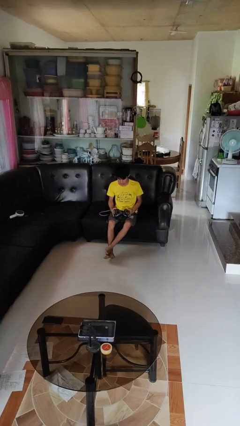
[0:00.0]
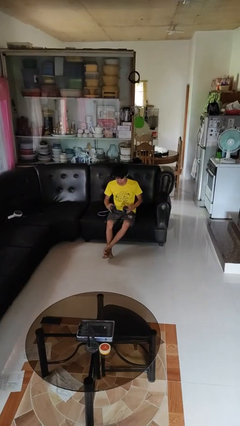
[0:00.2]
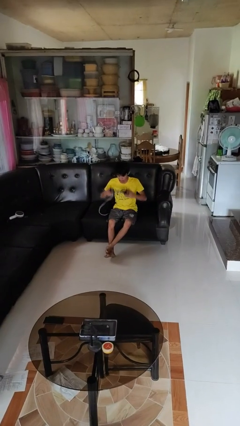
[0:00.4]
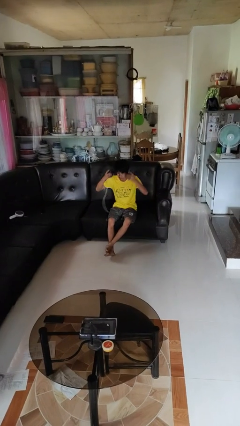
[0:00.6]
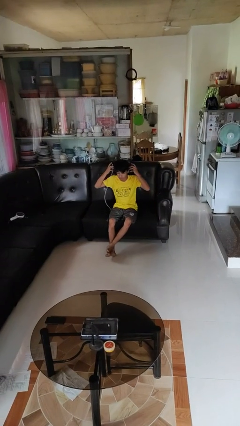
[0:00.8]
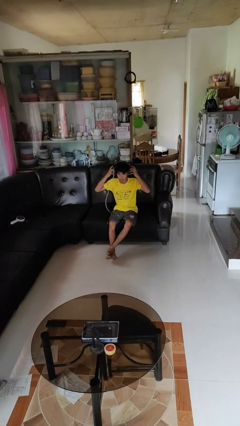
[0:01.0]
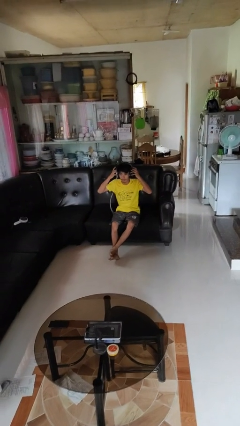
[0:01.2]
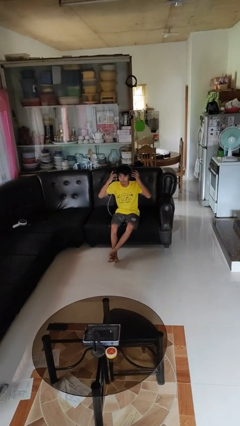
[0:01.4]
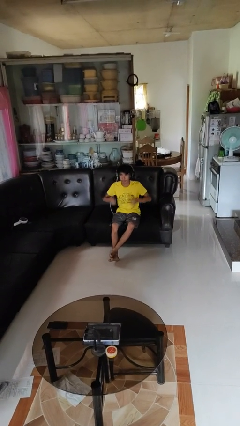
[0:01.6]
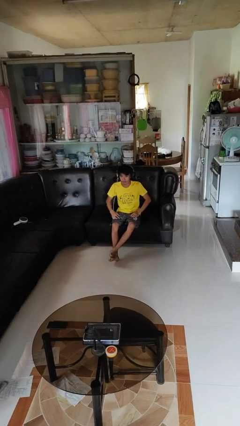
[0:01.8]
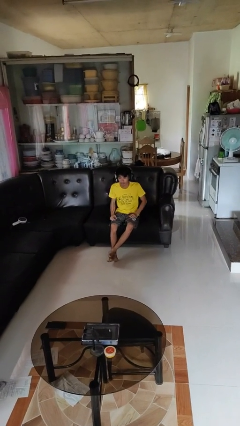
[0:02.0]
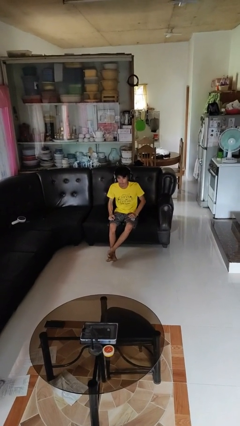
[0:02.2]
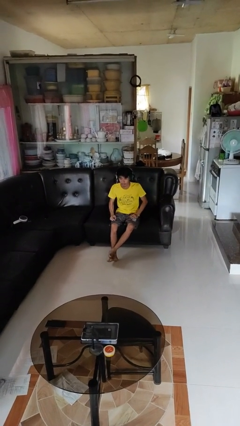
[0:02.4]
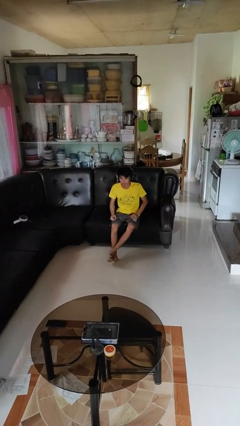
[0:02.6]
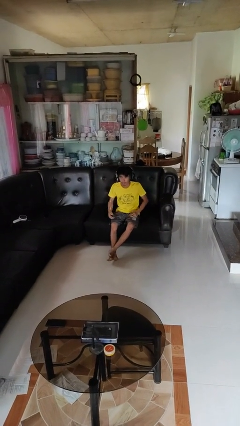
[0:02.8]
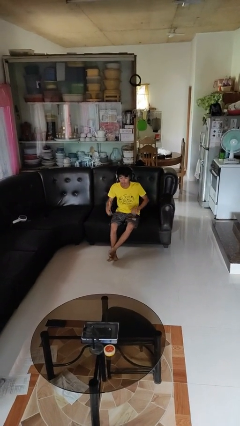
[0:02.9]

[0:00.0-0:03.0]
person puts on headphones

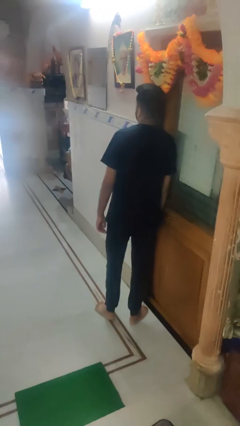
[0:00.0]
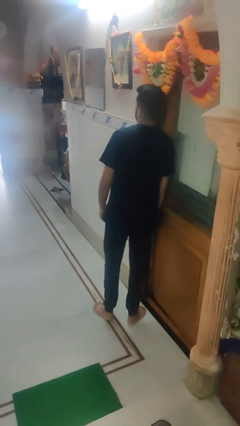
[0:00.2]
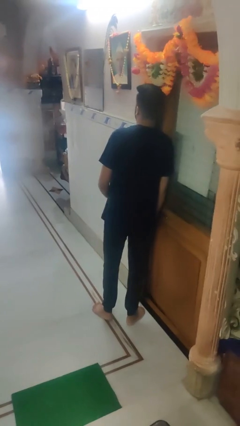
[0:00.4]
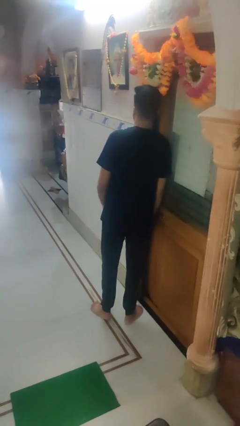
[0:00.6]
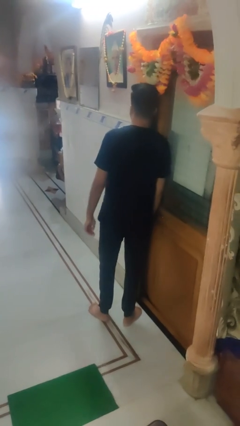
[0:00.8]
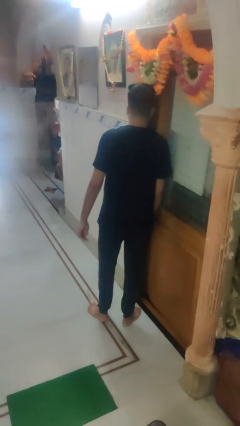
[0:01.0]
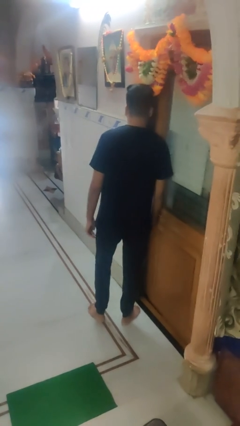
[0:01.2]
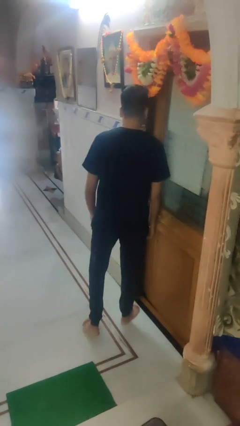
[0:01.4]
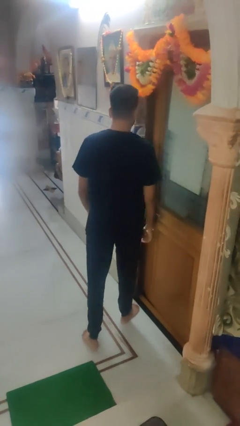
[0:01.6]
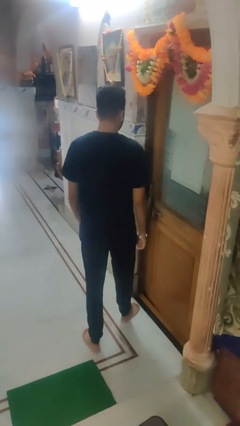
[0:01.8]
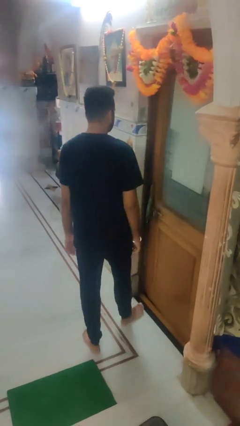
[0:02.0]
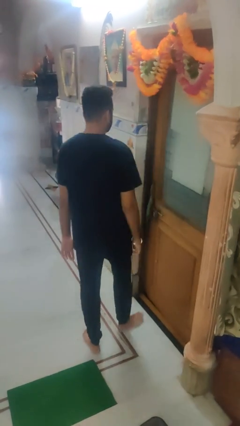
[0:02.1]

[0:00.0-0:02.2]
person bumps into wall

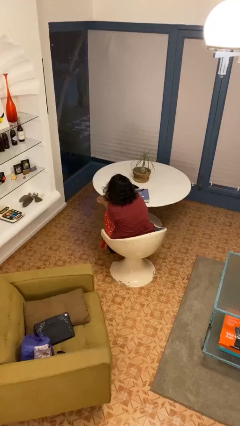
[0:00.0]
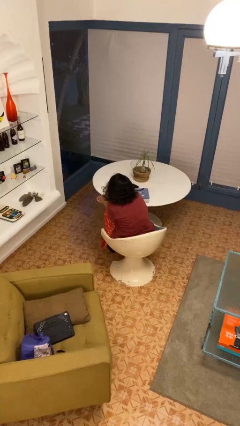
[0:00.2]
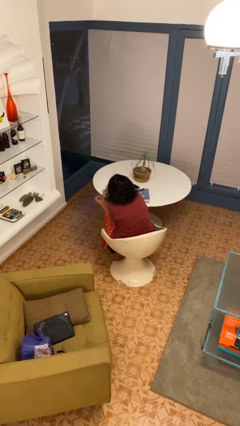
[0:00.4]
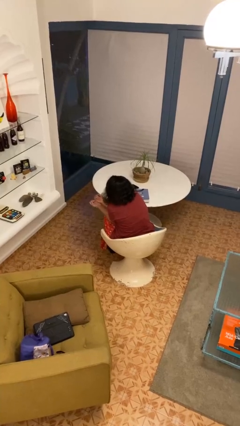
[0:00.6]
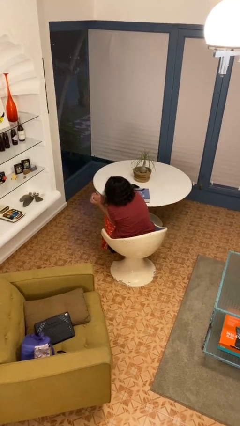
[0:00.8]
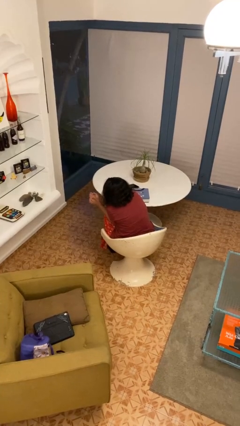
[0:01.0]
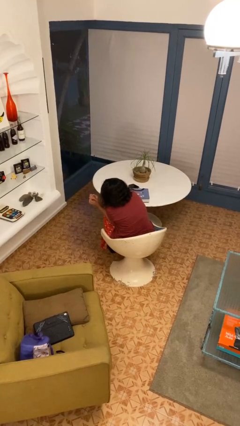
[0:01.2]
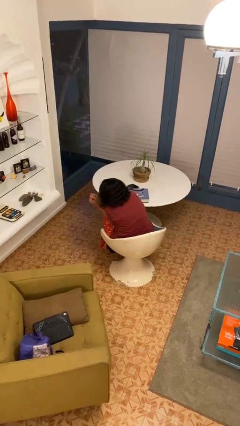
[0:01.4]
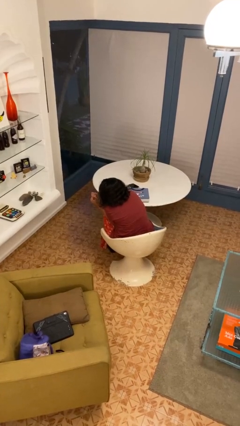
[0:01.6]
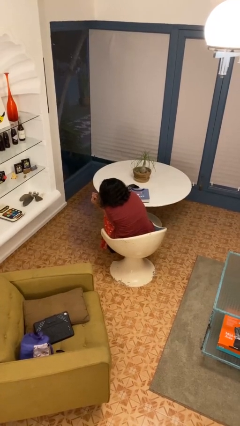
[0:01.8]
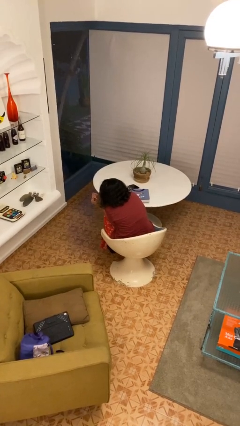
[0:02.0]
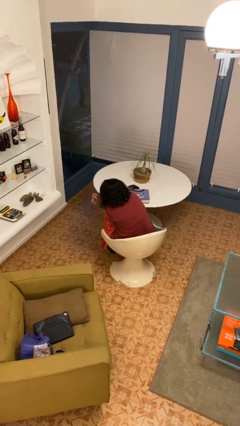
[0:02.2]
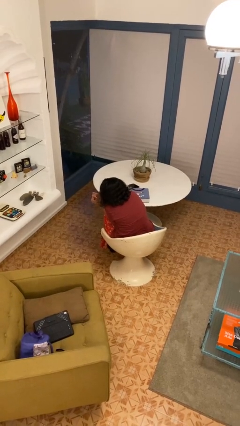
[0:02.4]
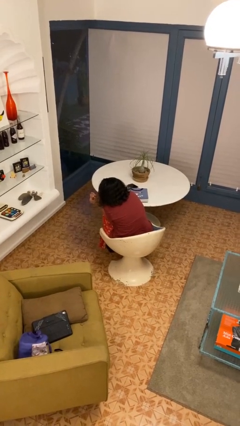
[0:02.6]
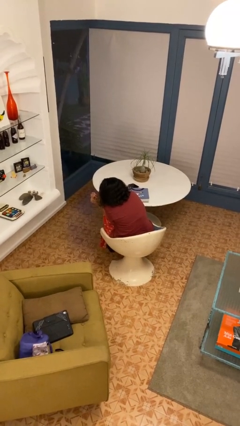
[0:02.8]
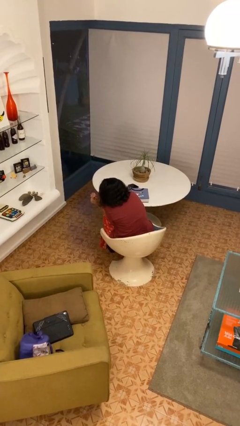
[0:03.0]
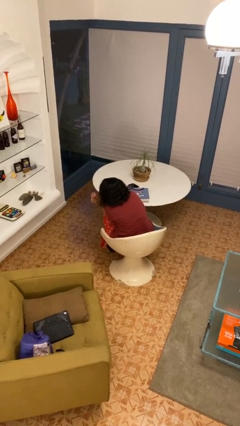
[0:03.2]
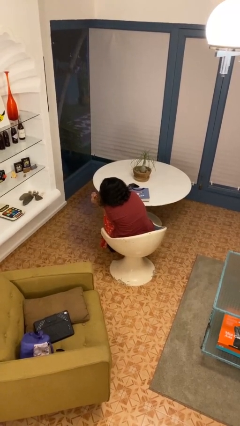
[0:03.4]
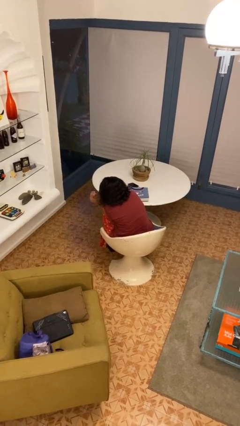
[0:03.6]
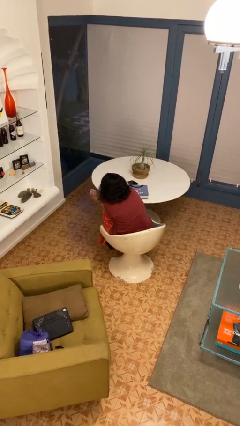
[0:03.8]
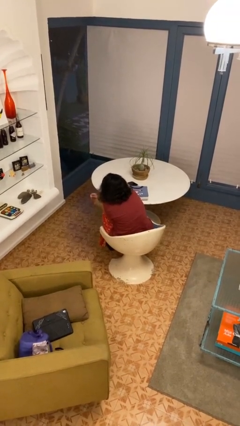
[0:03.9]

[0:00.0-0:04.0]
person looks at hands in lap

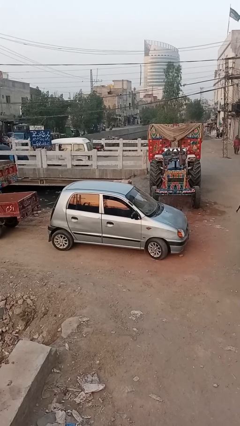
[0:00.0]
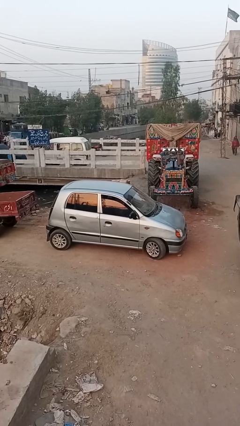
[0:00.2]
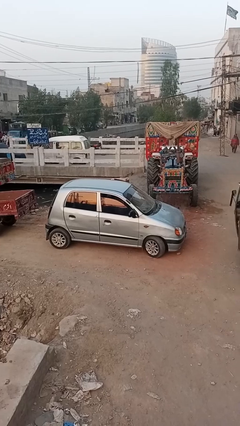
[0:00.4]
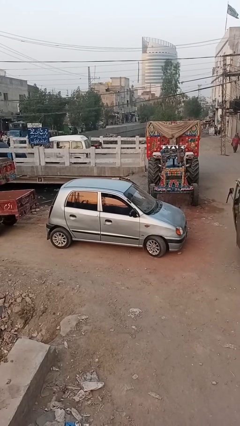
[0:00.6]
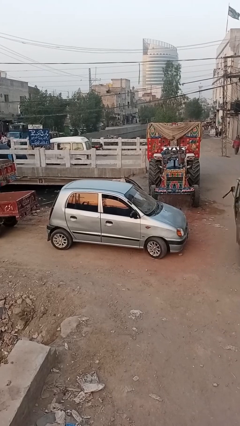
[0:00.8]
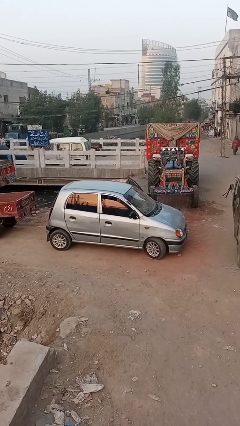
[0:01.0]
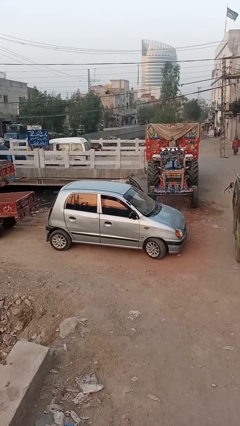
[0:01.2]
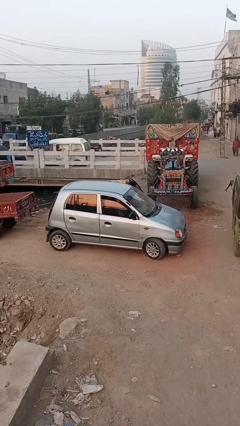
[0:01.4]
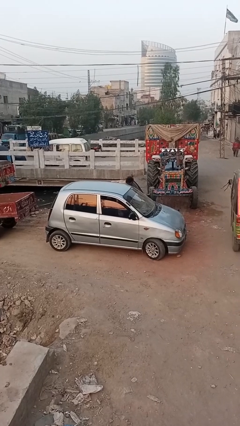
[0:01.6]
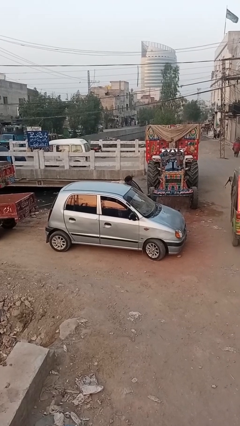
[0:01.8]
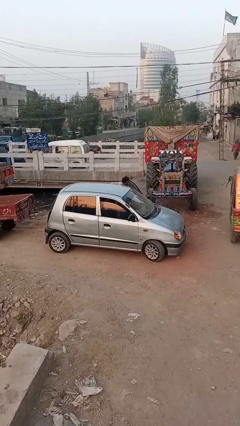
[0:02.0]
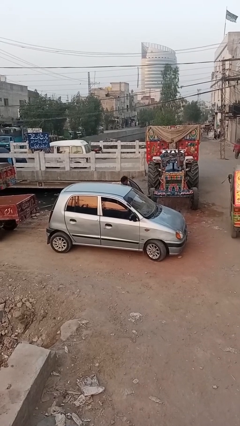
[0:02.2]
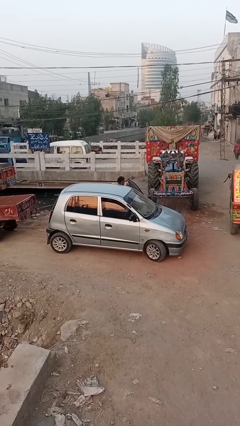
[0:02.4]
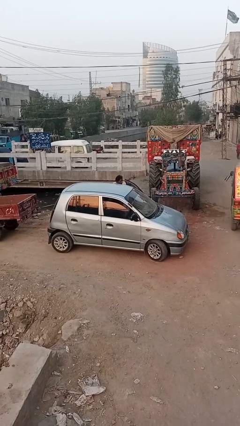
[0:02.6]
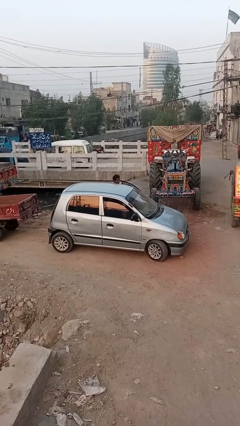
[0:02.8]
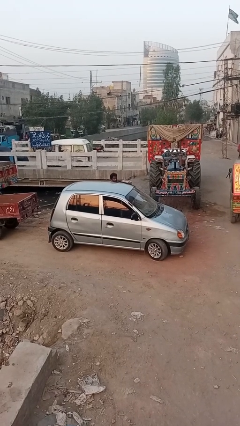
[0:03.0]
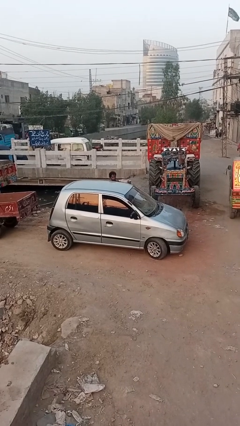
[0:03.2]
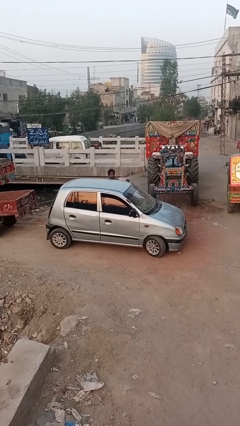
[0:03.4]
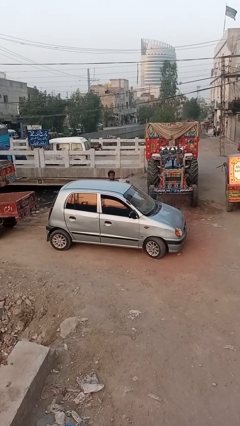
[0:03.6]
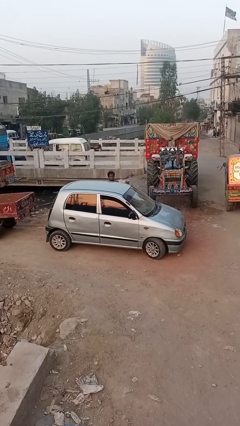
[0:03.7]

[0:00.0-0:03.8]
car drops off person

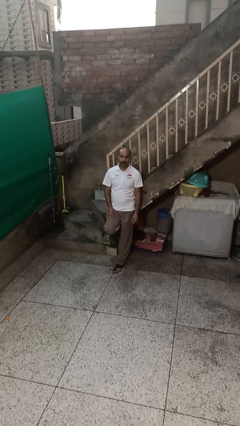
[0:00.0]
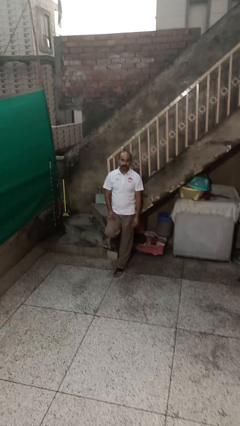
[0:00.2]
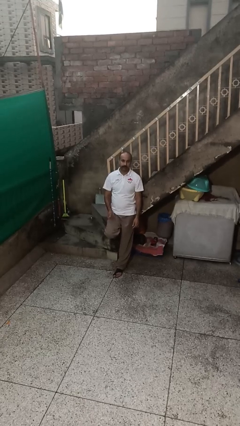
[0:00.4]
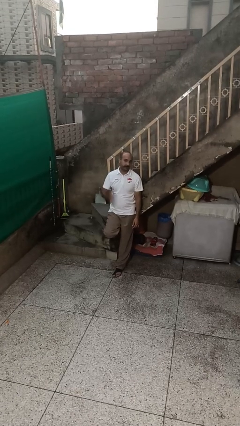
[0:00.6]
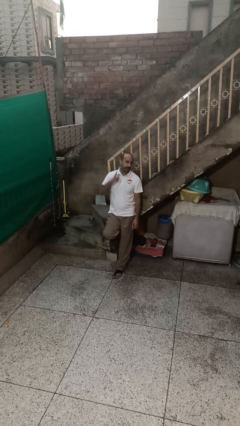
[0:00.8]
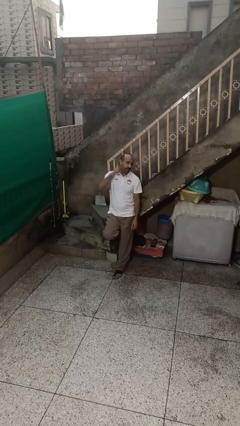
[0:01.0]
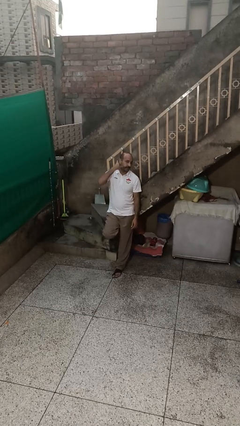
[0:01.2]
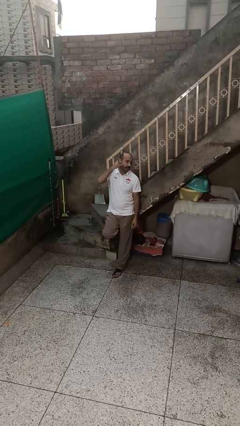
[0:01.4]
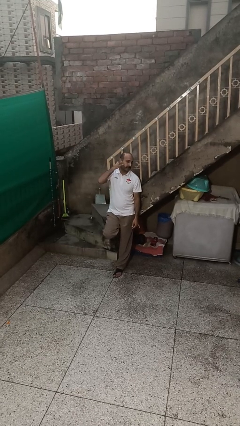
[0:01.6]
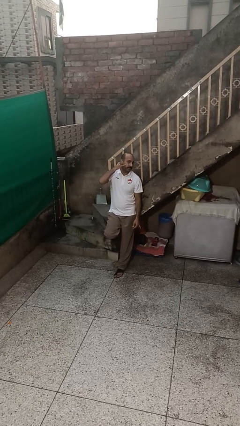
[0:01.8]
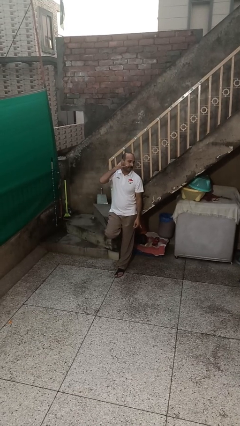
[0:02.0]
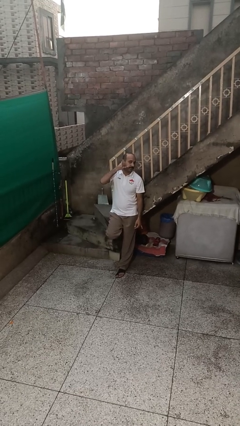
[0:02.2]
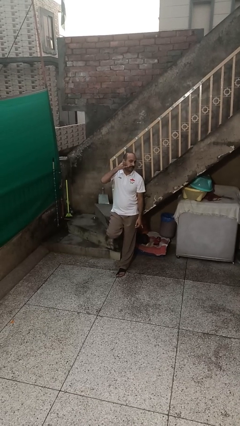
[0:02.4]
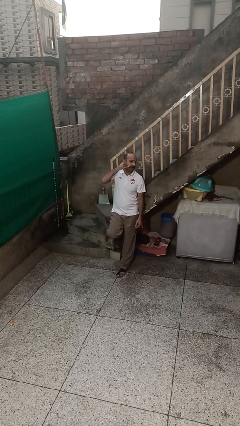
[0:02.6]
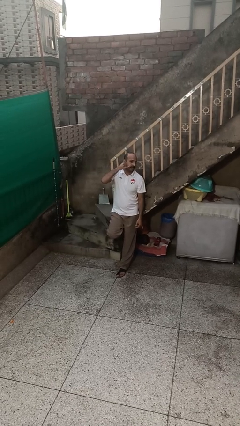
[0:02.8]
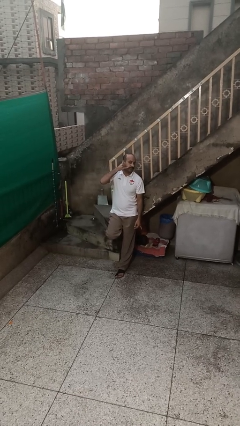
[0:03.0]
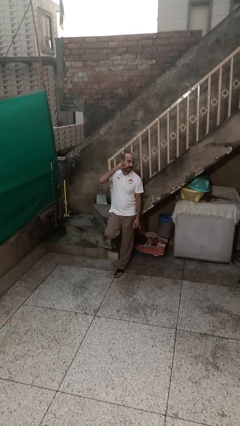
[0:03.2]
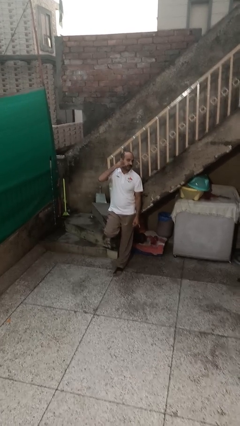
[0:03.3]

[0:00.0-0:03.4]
person gestures call me

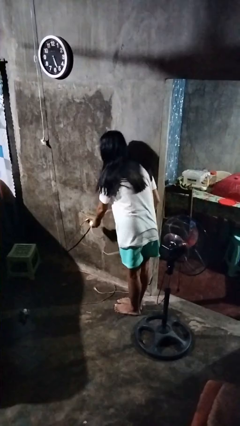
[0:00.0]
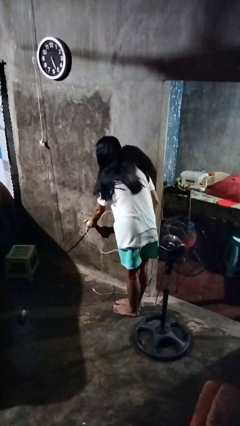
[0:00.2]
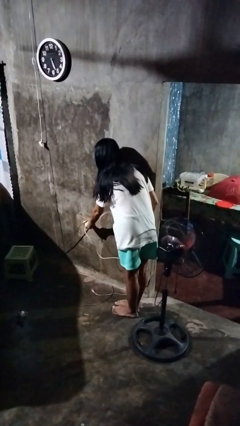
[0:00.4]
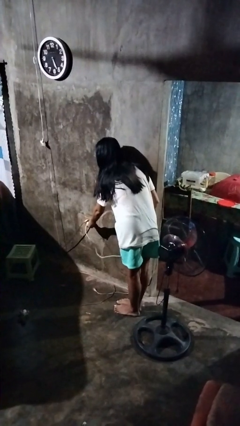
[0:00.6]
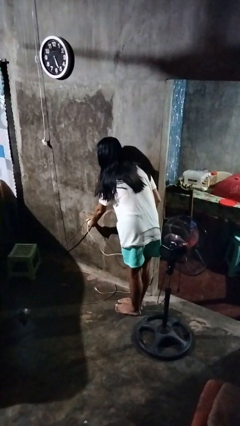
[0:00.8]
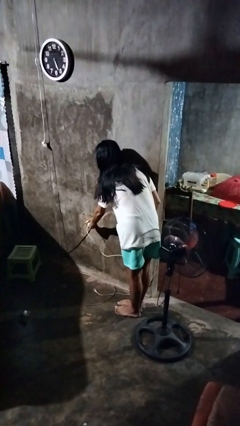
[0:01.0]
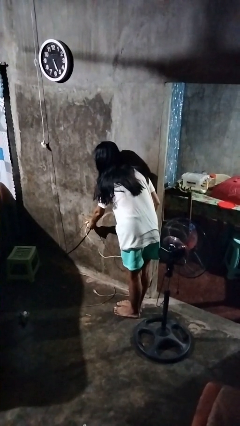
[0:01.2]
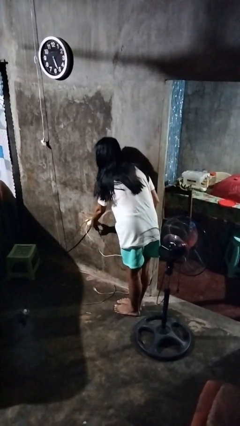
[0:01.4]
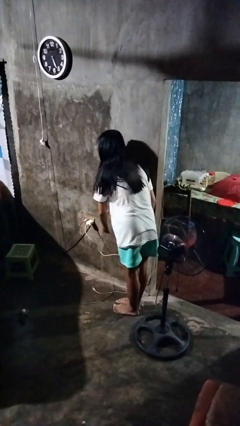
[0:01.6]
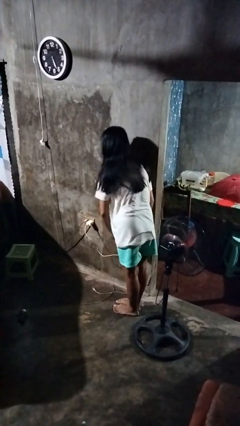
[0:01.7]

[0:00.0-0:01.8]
person plugs into electrical socket
